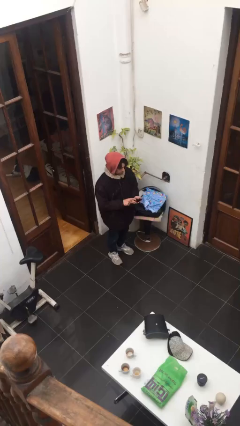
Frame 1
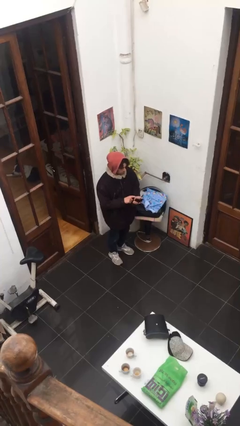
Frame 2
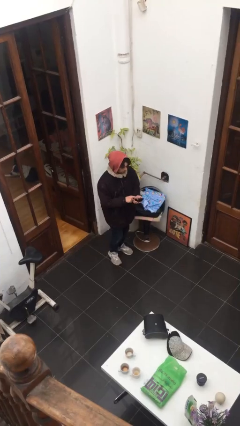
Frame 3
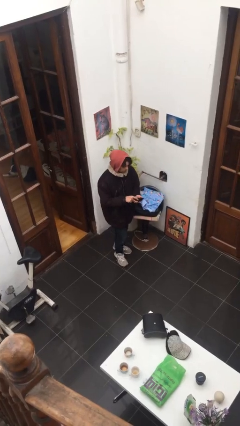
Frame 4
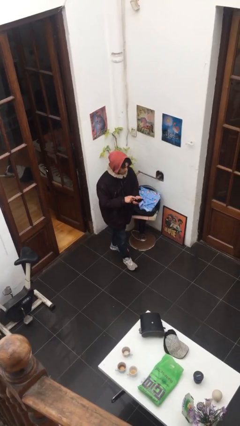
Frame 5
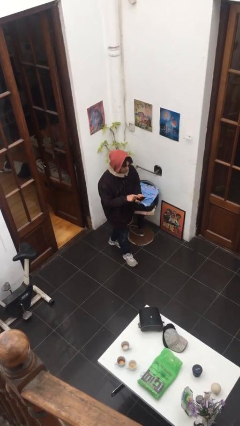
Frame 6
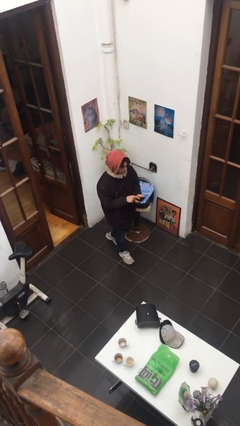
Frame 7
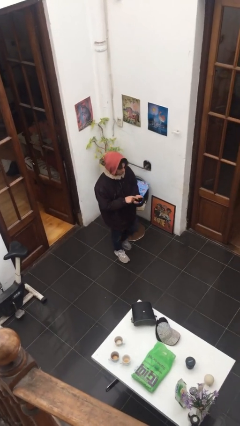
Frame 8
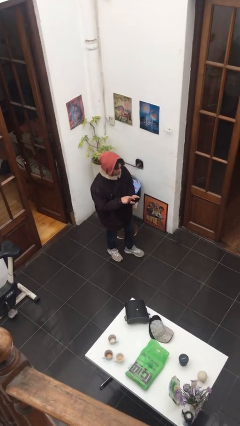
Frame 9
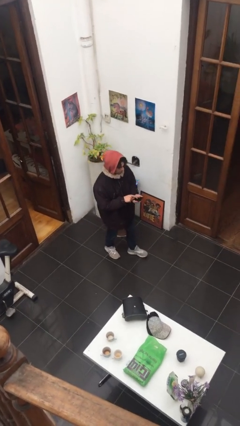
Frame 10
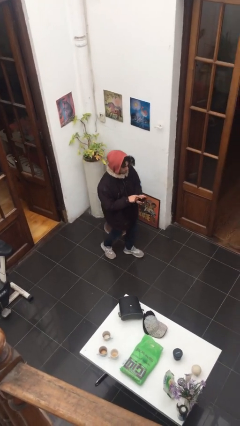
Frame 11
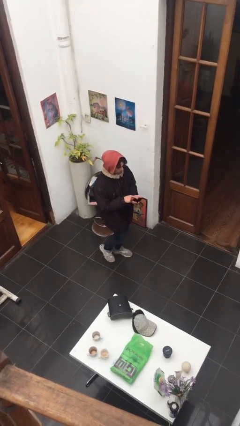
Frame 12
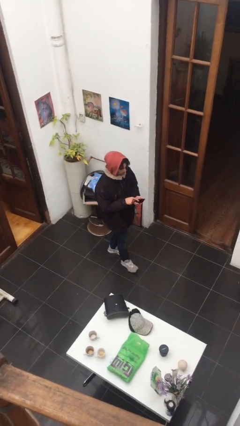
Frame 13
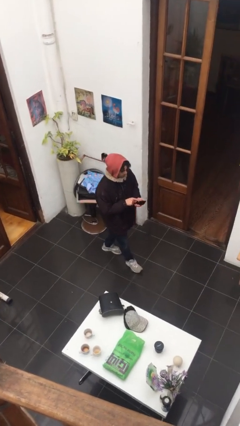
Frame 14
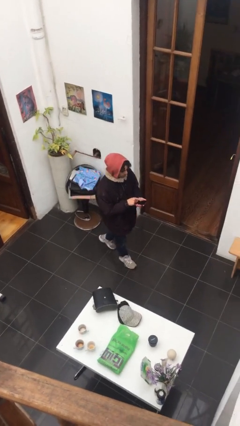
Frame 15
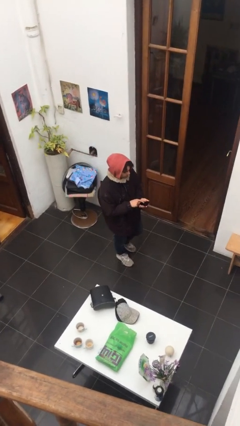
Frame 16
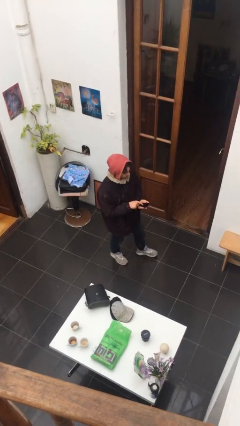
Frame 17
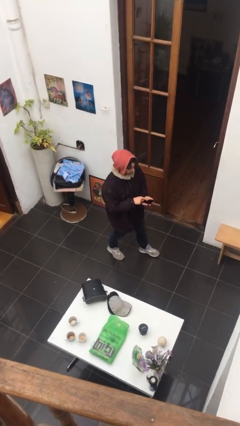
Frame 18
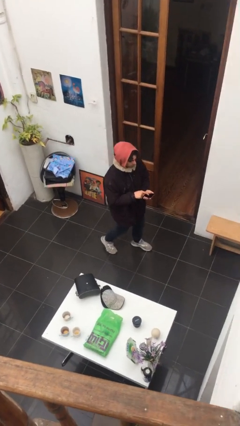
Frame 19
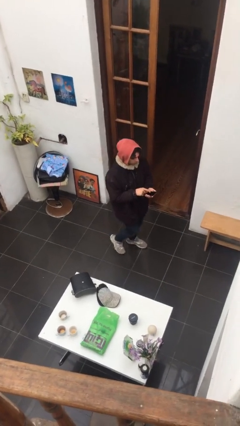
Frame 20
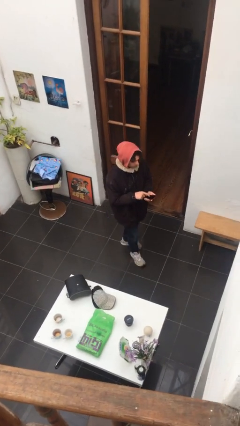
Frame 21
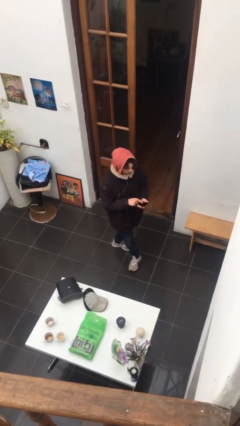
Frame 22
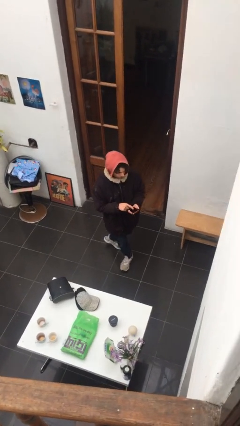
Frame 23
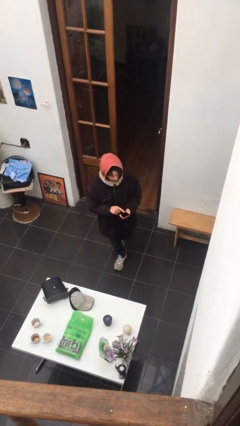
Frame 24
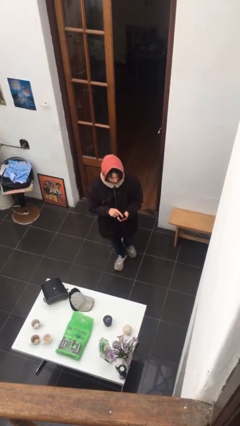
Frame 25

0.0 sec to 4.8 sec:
person texts on phone

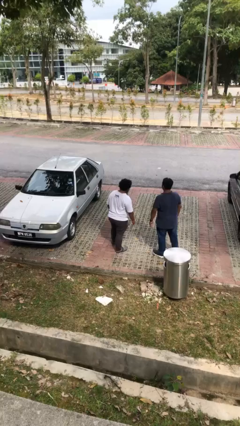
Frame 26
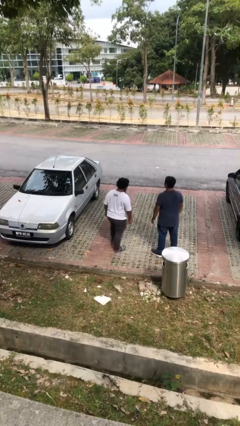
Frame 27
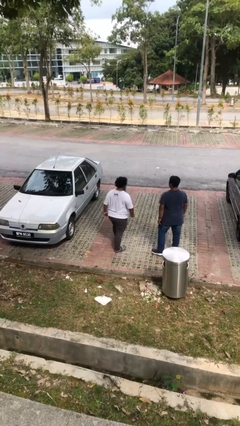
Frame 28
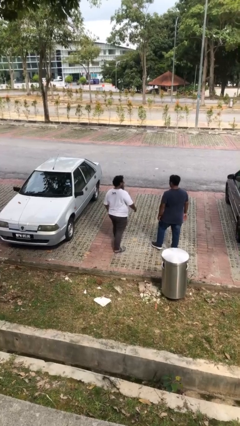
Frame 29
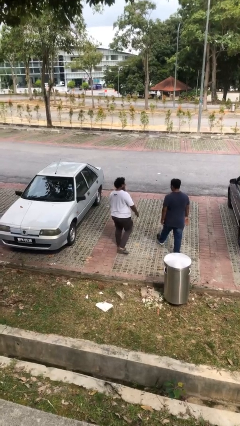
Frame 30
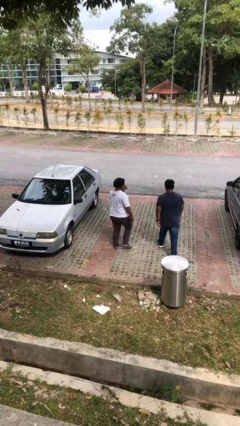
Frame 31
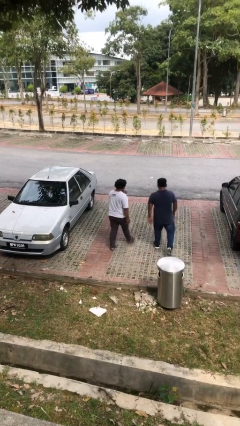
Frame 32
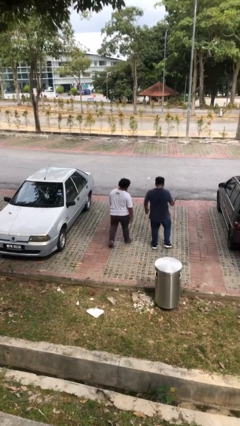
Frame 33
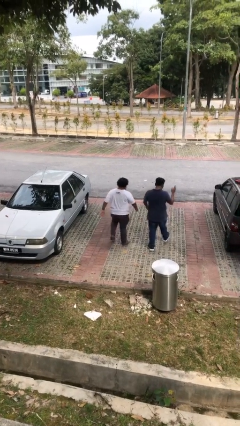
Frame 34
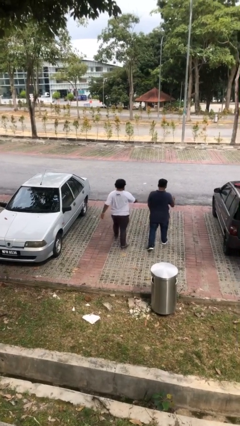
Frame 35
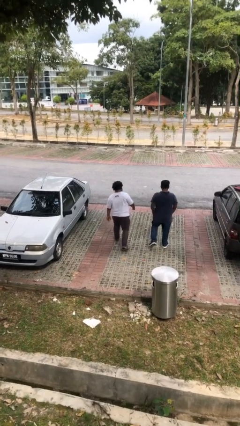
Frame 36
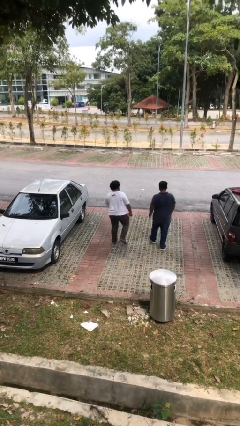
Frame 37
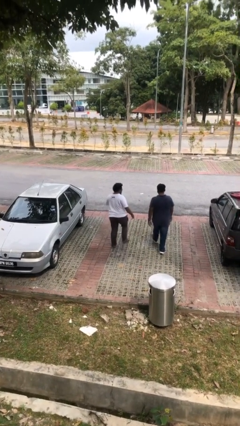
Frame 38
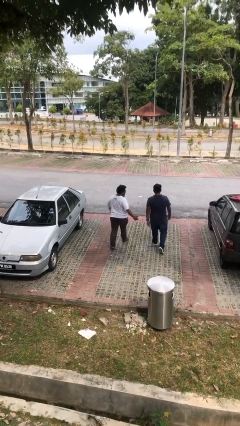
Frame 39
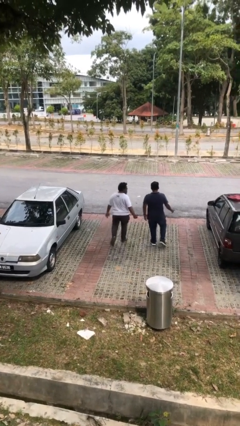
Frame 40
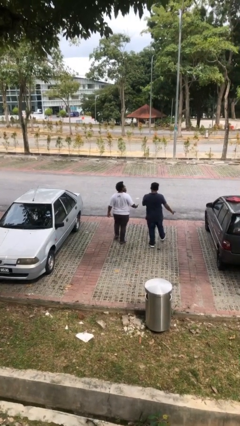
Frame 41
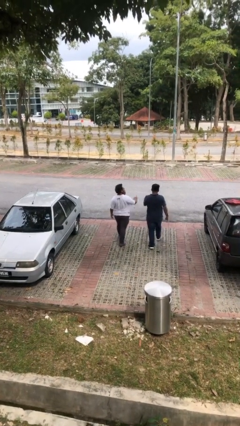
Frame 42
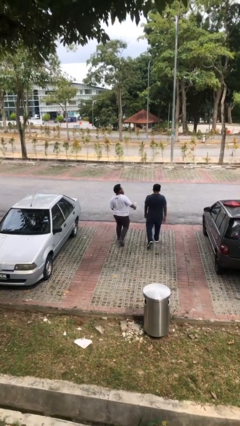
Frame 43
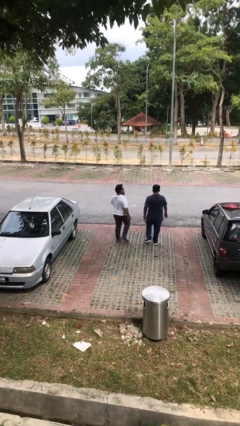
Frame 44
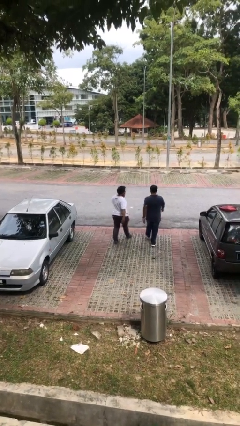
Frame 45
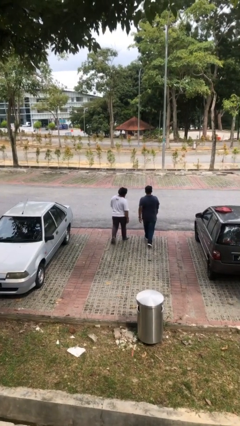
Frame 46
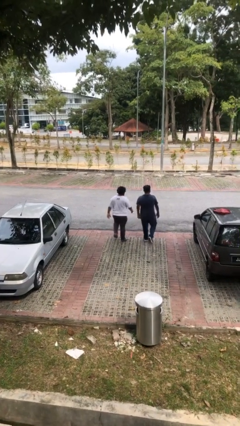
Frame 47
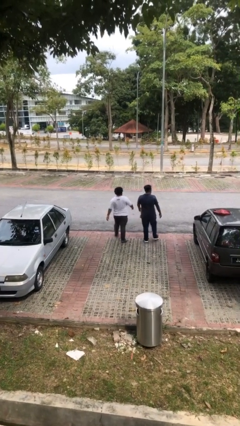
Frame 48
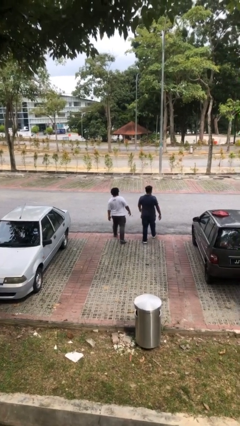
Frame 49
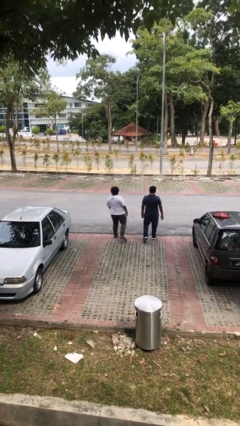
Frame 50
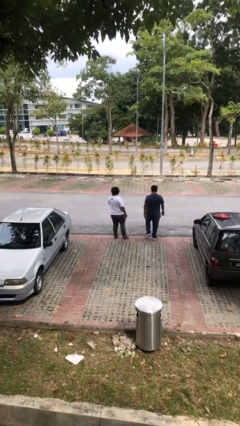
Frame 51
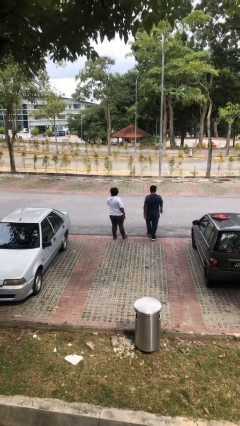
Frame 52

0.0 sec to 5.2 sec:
person talks to person

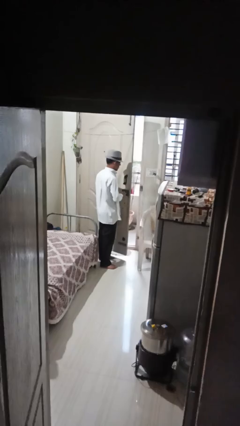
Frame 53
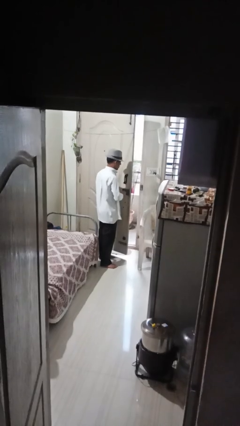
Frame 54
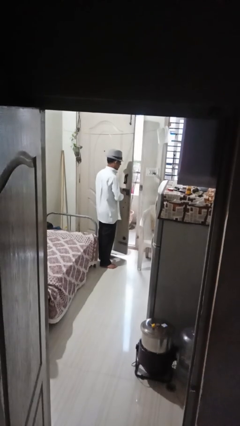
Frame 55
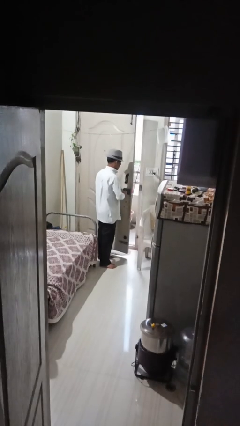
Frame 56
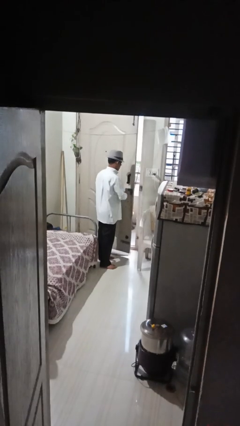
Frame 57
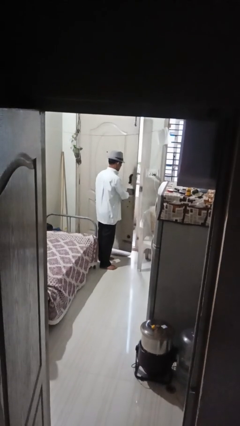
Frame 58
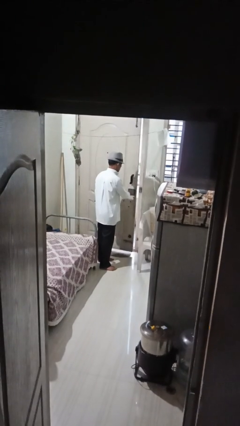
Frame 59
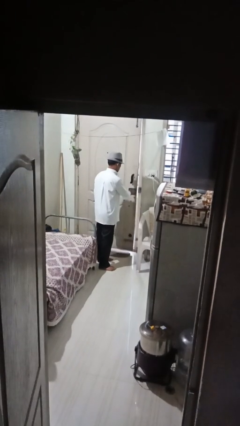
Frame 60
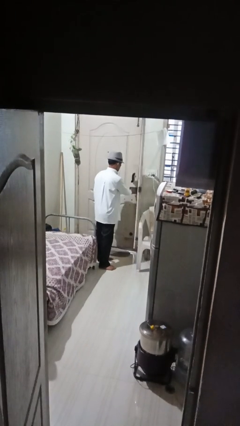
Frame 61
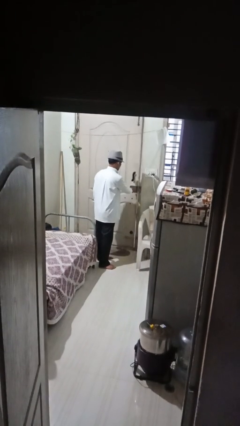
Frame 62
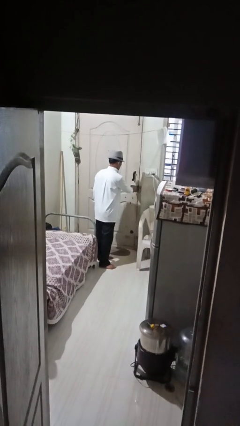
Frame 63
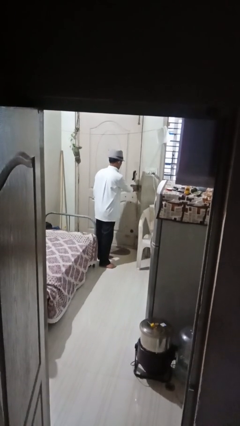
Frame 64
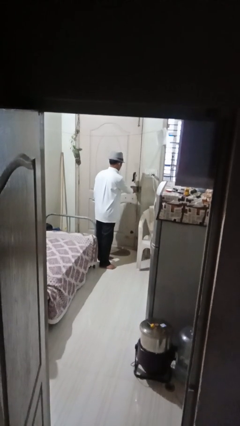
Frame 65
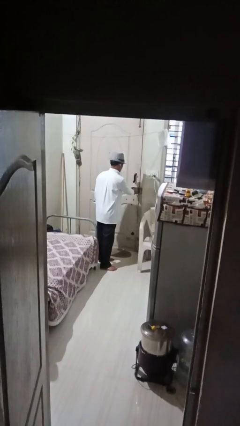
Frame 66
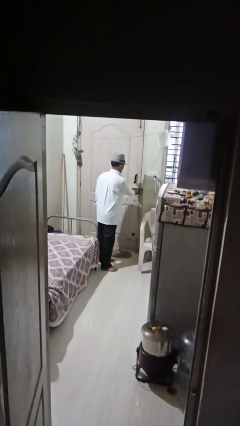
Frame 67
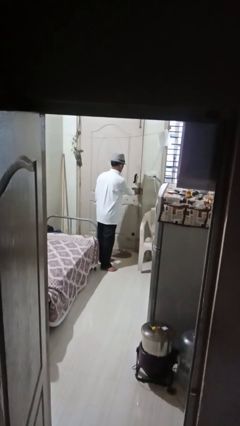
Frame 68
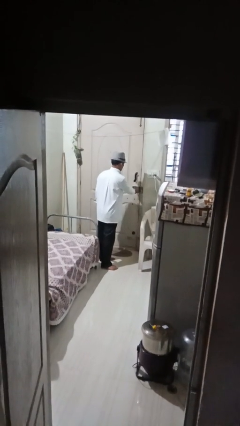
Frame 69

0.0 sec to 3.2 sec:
person closes facility door

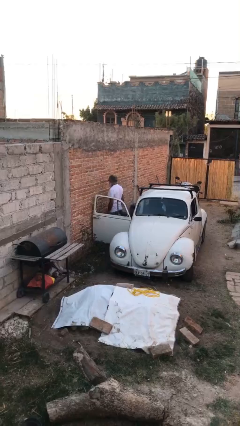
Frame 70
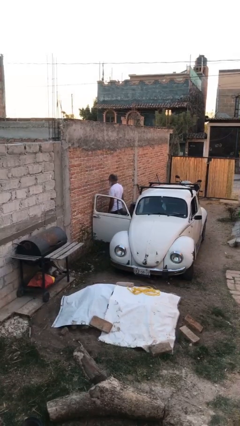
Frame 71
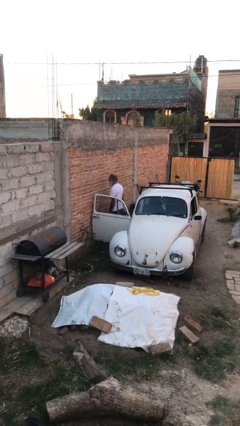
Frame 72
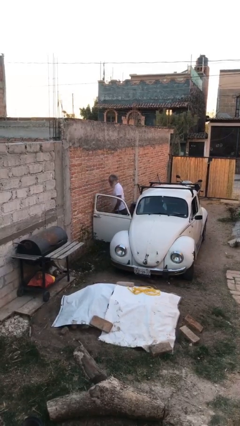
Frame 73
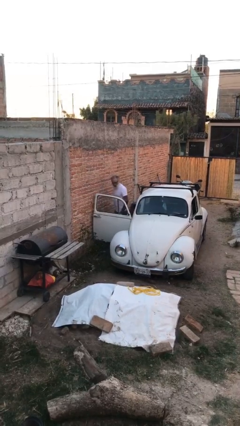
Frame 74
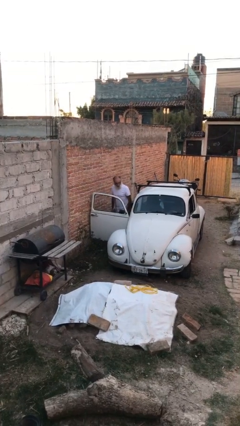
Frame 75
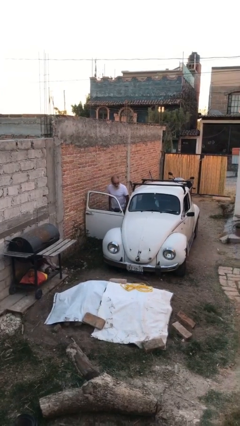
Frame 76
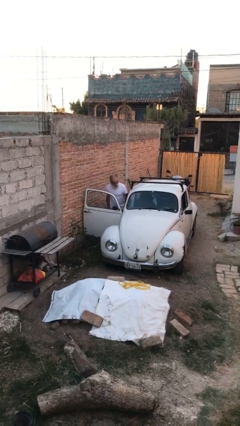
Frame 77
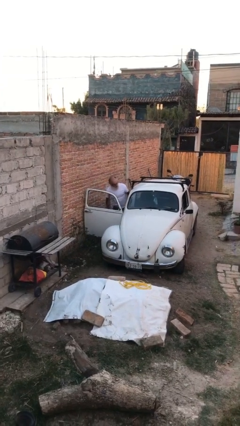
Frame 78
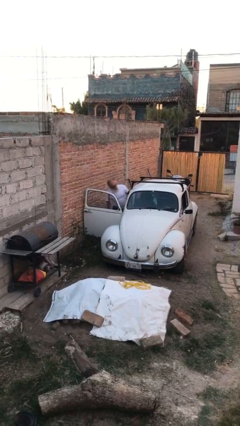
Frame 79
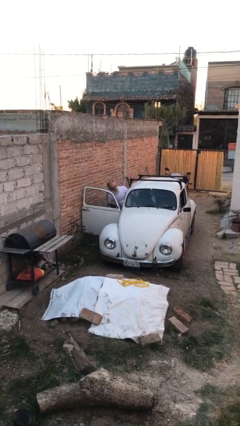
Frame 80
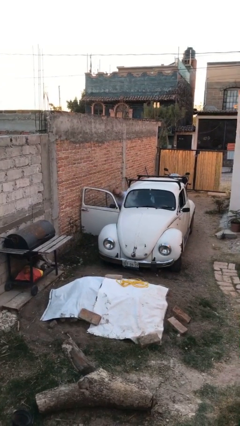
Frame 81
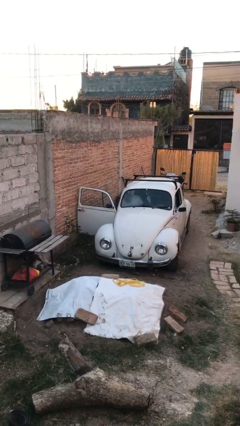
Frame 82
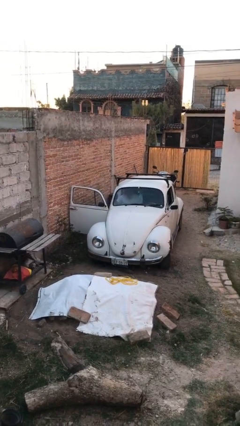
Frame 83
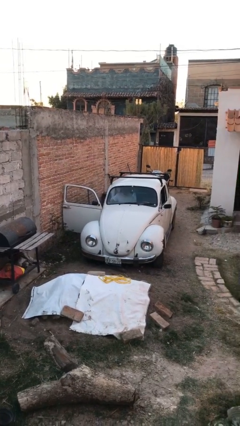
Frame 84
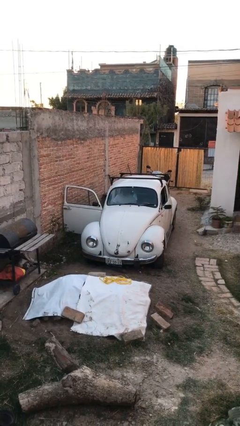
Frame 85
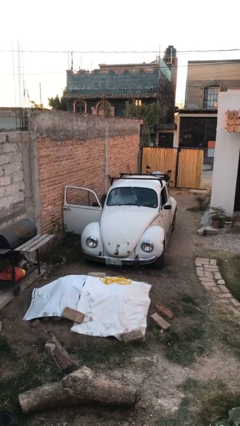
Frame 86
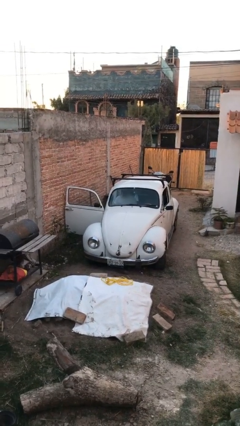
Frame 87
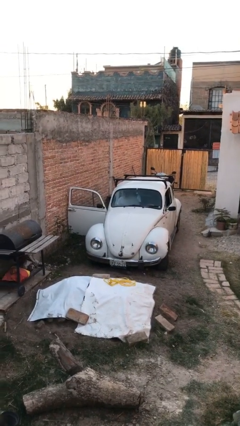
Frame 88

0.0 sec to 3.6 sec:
person enters car

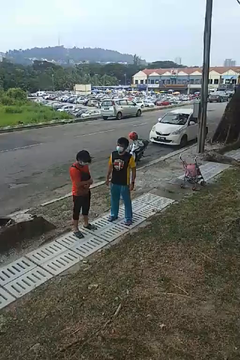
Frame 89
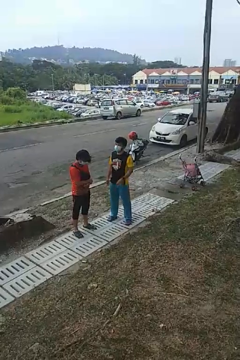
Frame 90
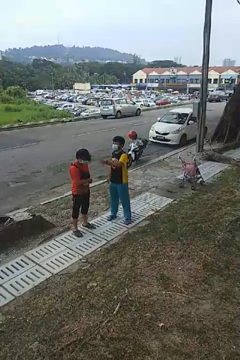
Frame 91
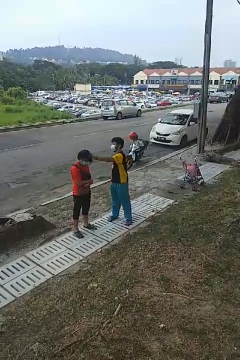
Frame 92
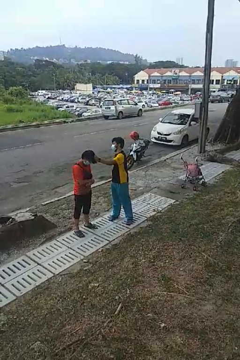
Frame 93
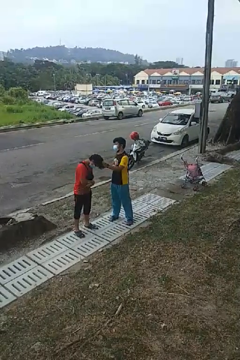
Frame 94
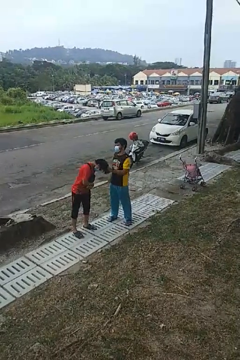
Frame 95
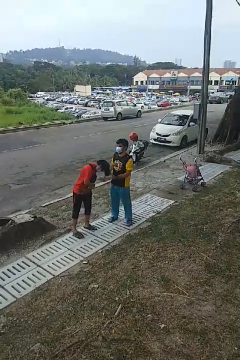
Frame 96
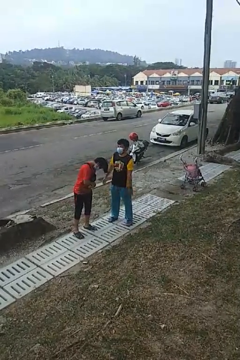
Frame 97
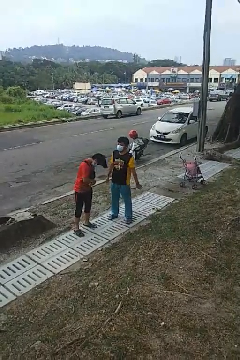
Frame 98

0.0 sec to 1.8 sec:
person grabs person by hair
